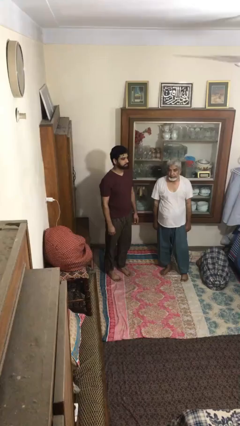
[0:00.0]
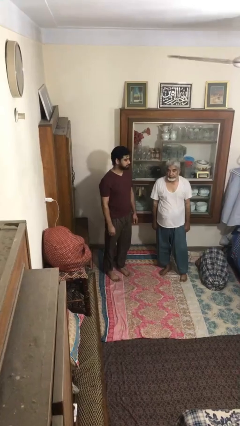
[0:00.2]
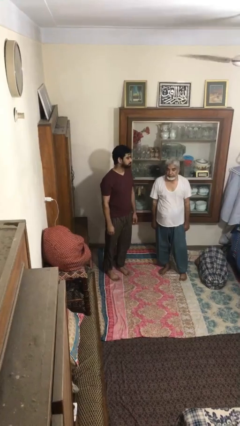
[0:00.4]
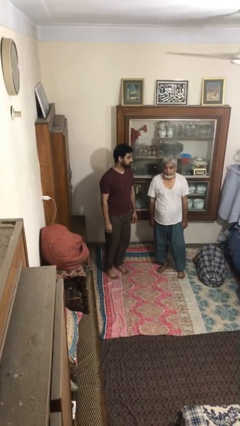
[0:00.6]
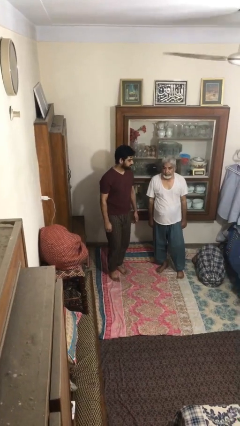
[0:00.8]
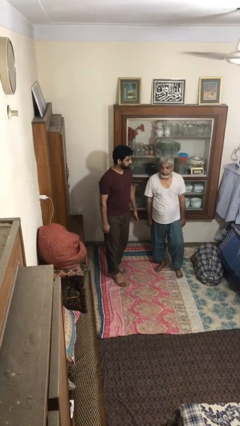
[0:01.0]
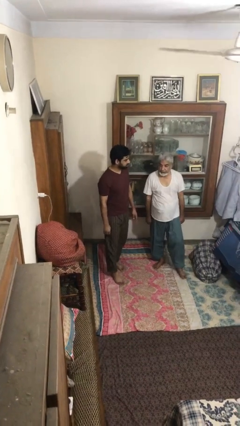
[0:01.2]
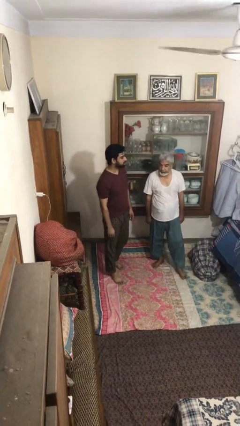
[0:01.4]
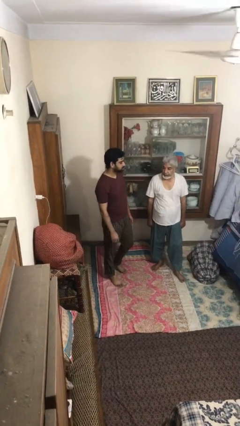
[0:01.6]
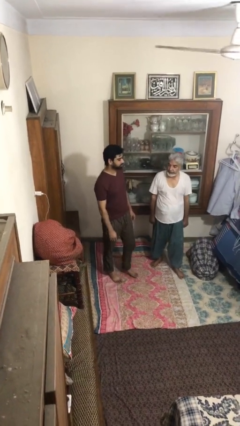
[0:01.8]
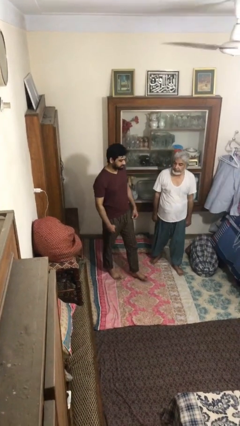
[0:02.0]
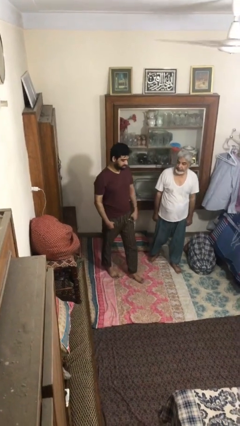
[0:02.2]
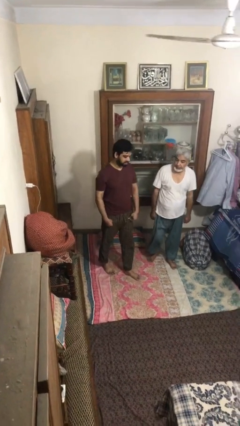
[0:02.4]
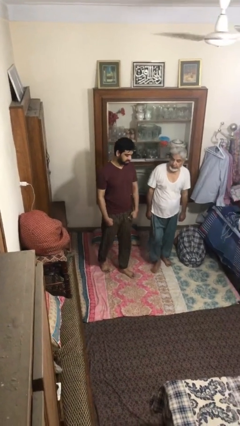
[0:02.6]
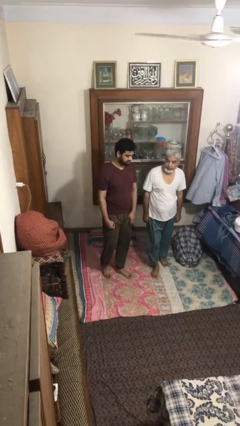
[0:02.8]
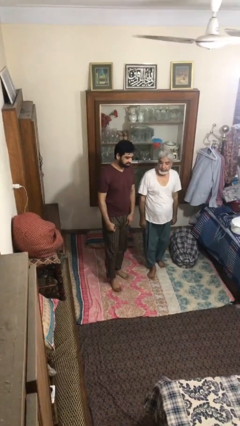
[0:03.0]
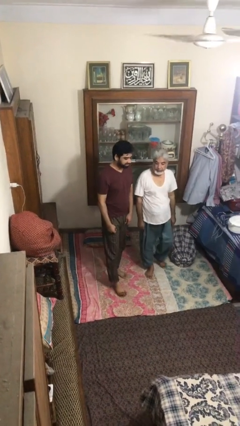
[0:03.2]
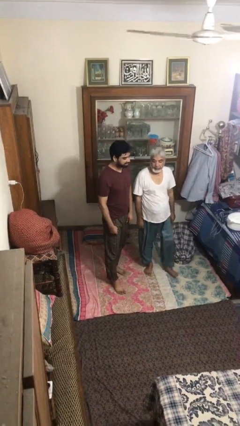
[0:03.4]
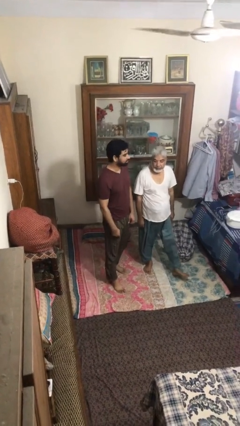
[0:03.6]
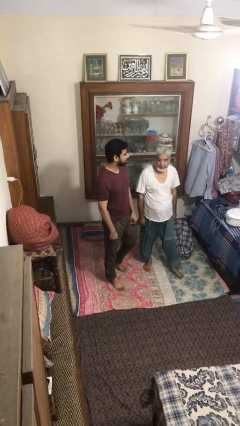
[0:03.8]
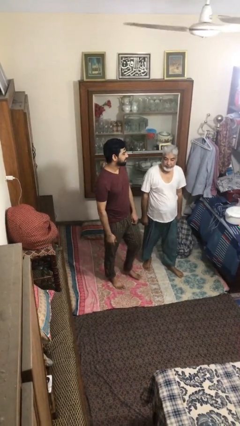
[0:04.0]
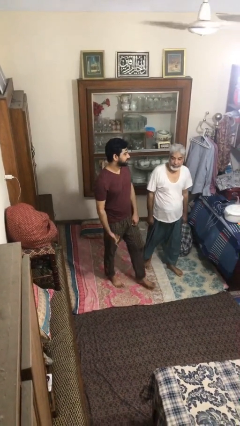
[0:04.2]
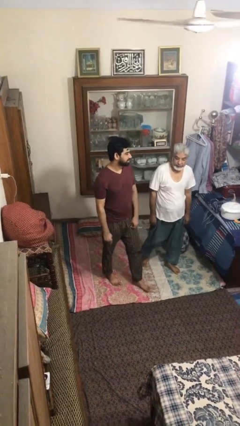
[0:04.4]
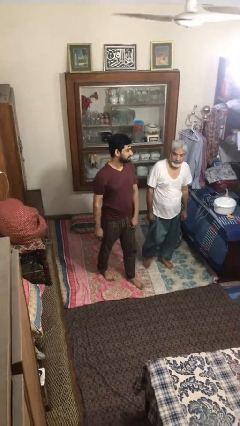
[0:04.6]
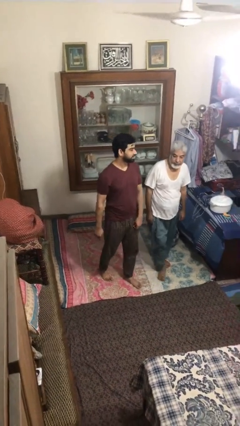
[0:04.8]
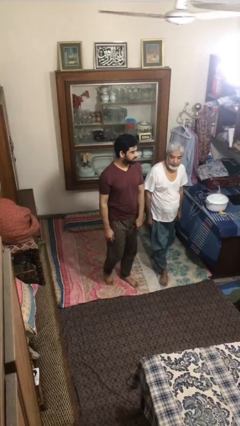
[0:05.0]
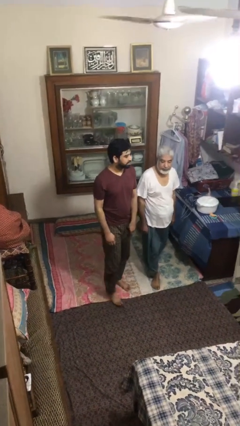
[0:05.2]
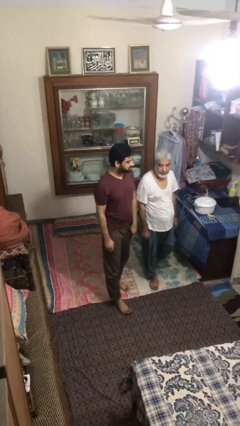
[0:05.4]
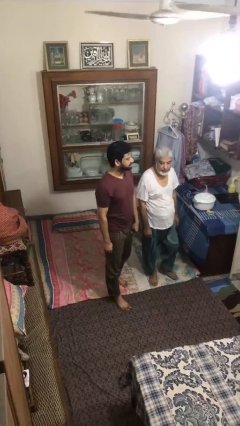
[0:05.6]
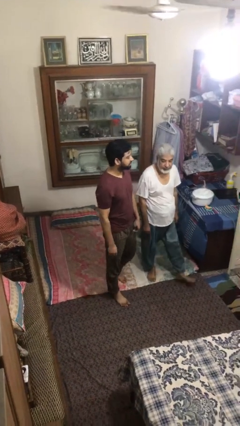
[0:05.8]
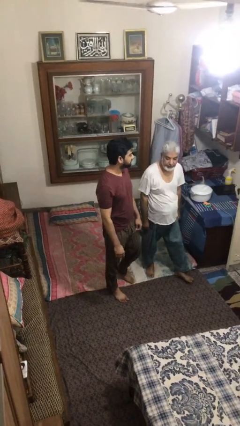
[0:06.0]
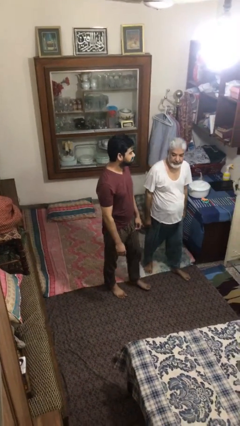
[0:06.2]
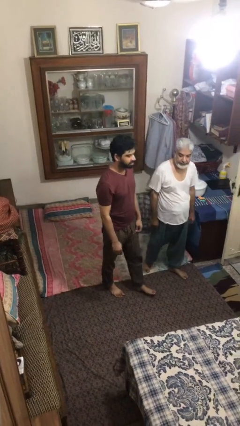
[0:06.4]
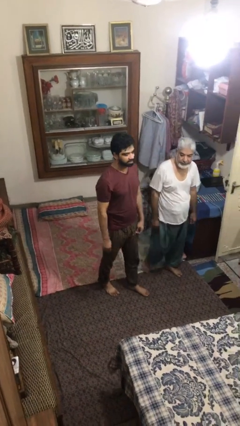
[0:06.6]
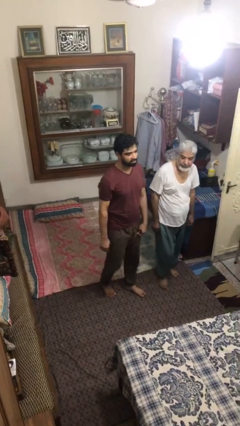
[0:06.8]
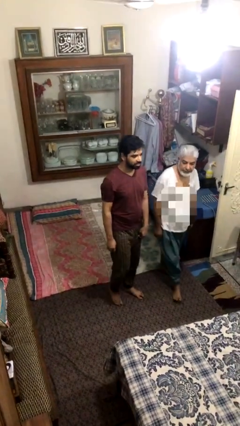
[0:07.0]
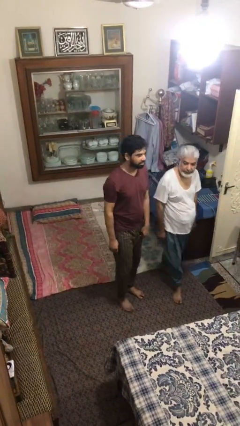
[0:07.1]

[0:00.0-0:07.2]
person talks to person

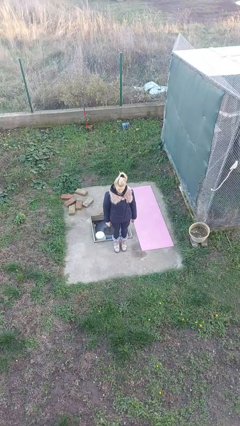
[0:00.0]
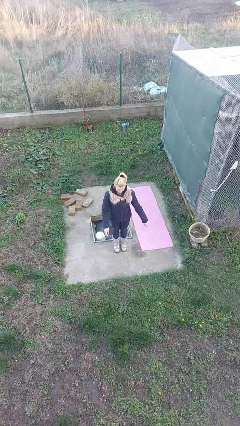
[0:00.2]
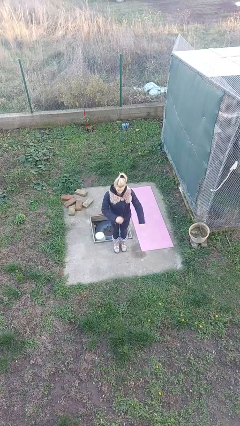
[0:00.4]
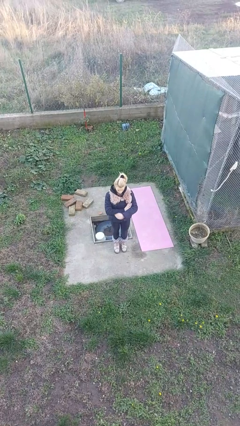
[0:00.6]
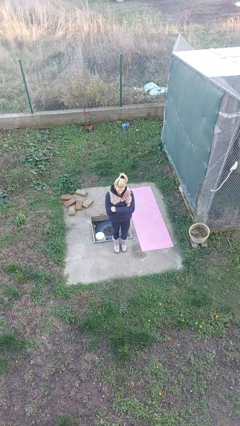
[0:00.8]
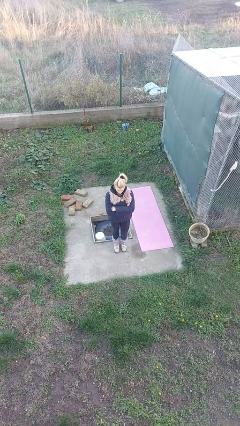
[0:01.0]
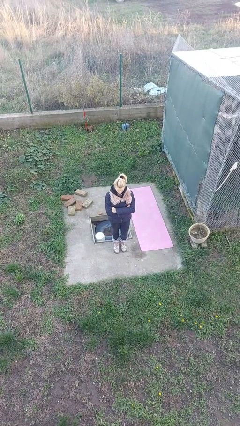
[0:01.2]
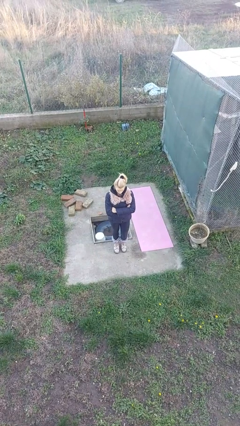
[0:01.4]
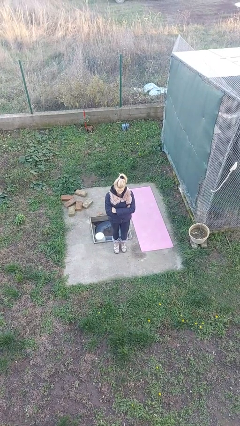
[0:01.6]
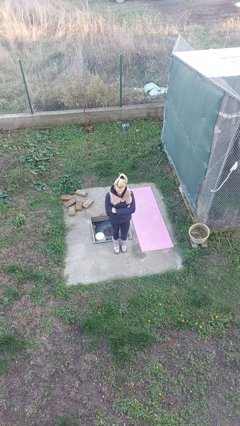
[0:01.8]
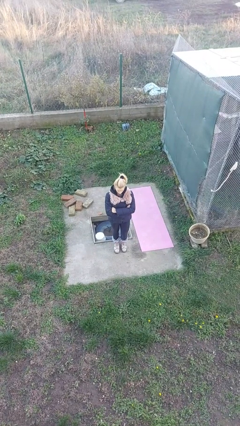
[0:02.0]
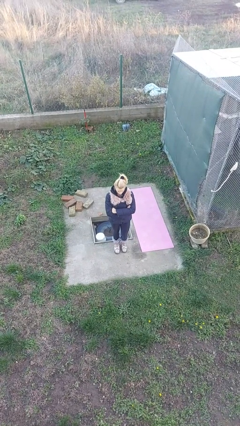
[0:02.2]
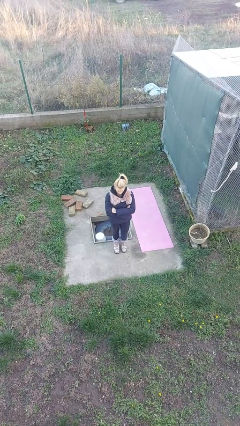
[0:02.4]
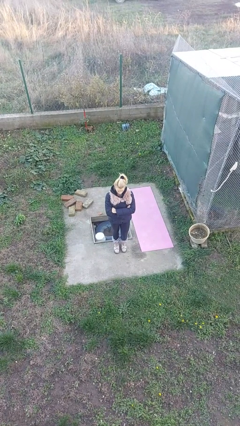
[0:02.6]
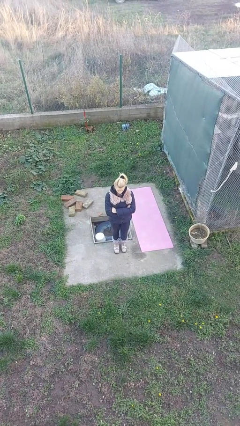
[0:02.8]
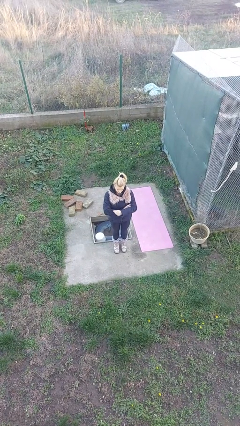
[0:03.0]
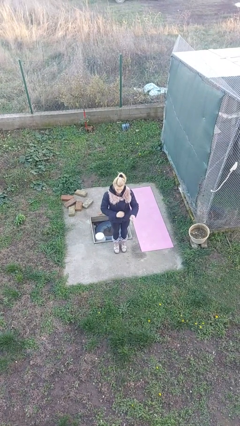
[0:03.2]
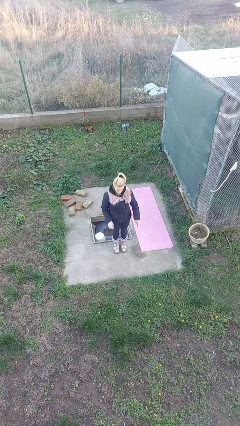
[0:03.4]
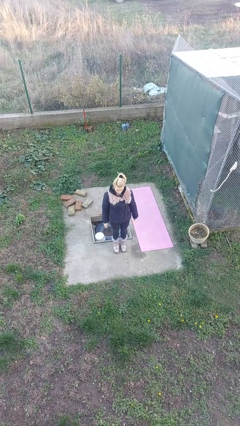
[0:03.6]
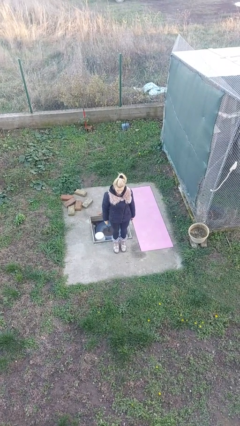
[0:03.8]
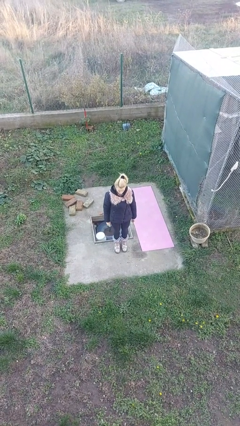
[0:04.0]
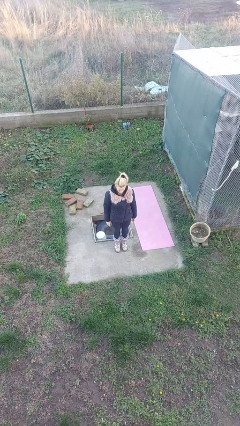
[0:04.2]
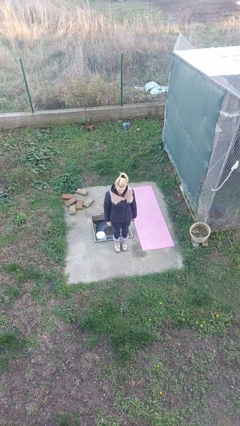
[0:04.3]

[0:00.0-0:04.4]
person crosses arms

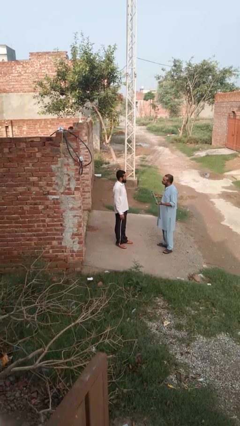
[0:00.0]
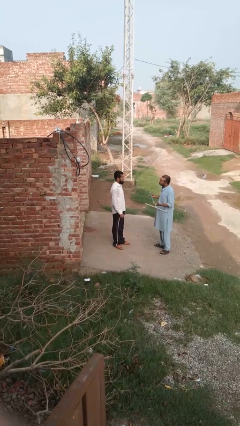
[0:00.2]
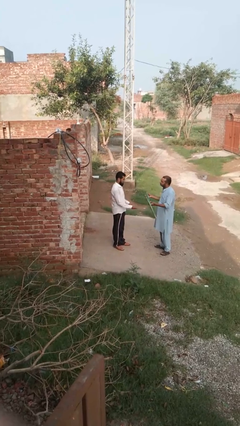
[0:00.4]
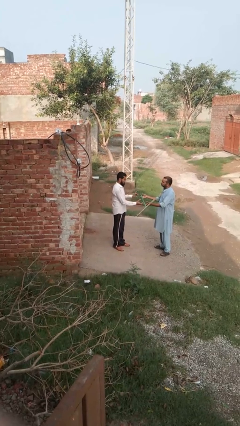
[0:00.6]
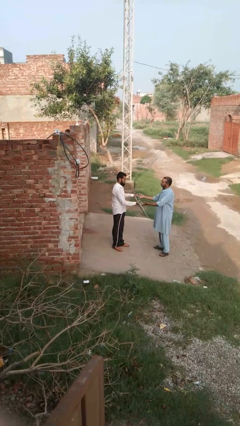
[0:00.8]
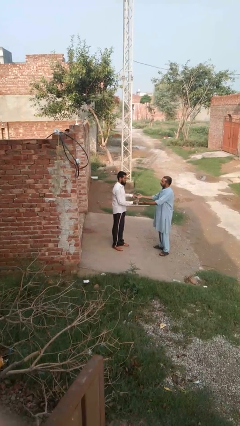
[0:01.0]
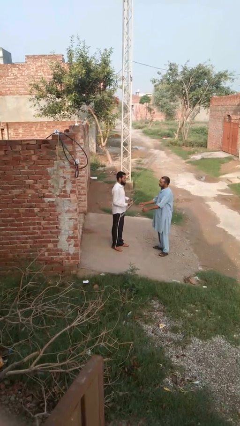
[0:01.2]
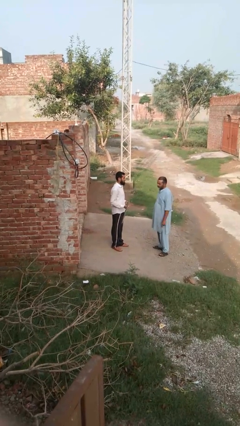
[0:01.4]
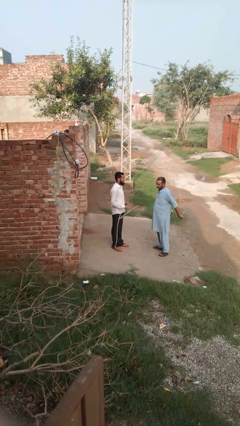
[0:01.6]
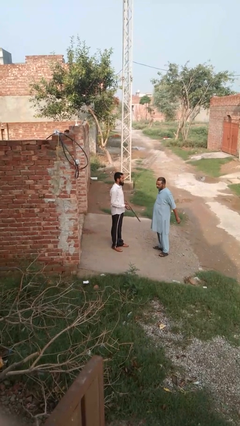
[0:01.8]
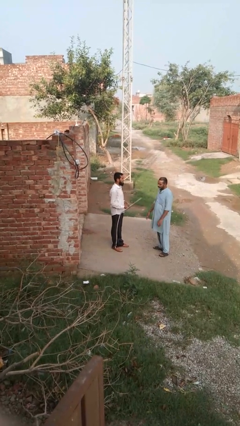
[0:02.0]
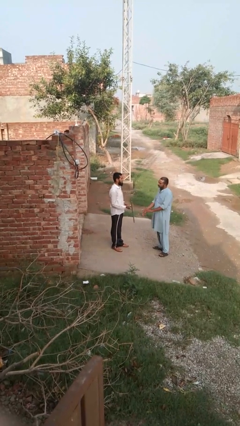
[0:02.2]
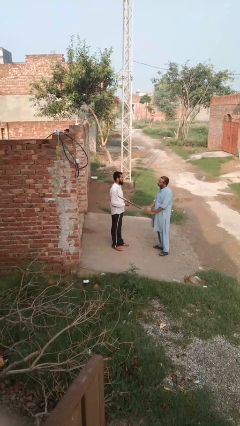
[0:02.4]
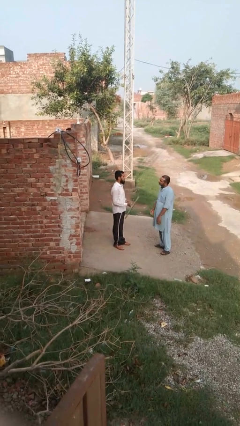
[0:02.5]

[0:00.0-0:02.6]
person transfers object to person

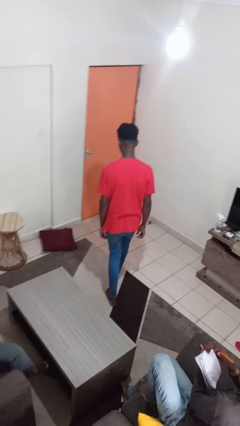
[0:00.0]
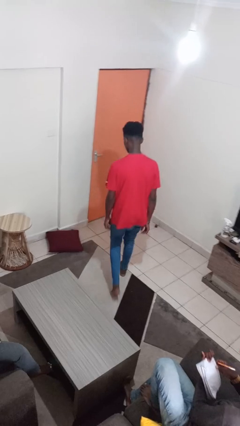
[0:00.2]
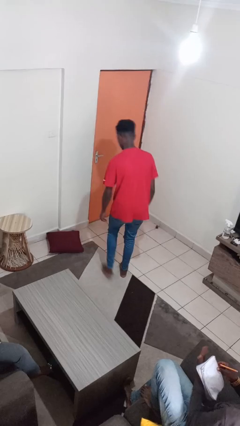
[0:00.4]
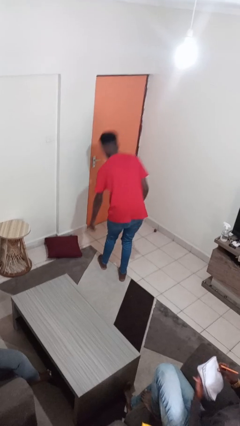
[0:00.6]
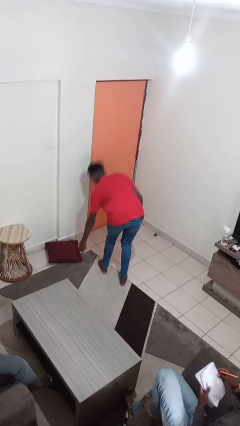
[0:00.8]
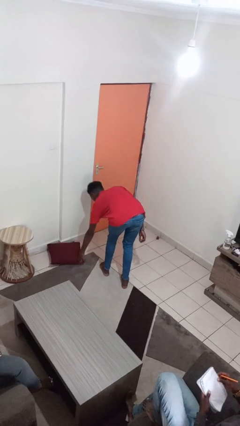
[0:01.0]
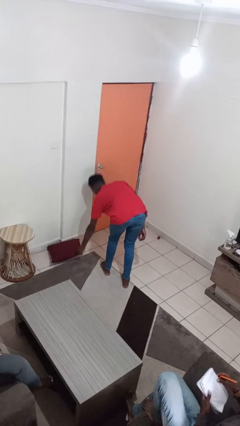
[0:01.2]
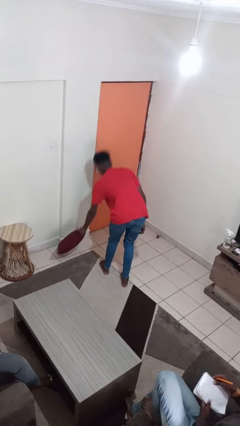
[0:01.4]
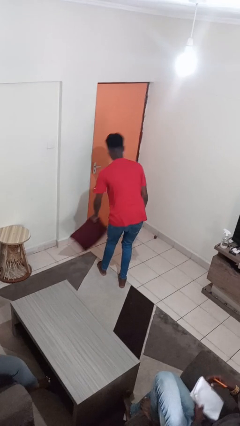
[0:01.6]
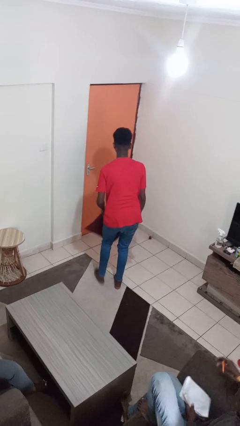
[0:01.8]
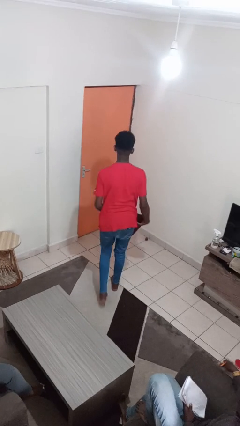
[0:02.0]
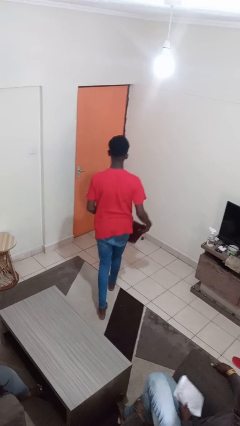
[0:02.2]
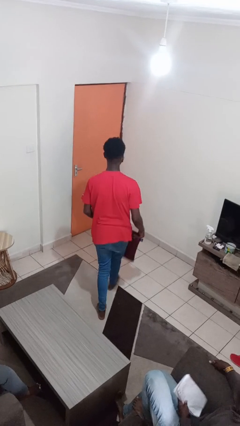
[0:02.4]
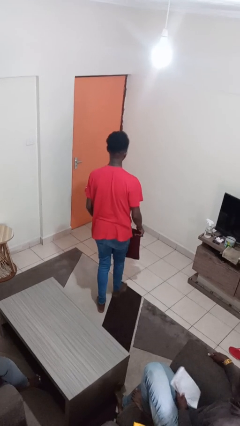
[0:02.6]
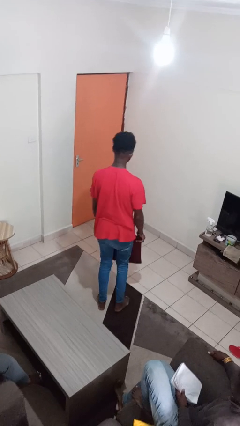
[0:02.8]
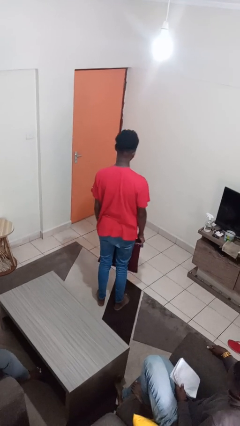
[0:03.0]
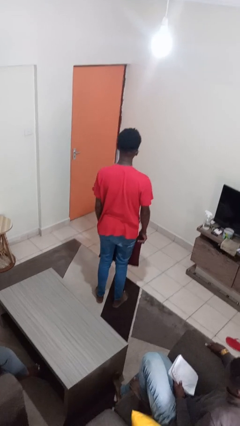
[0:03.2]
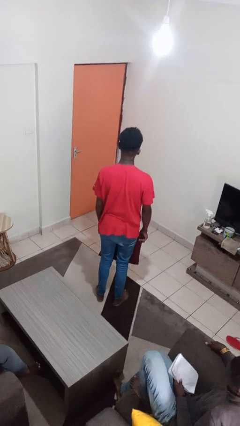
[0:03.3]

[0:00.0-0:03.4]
person picks up object from floor
